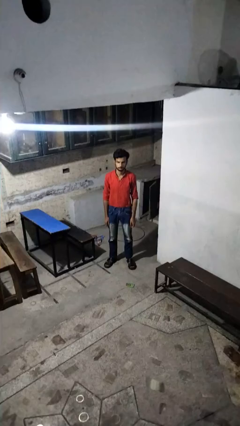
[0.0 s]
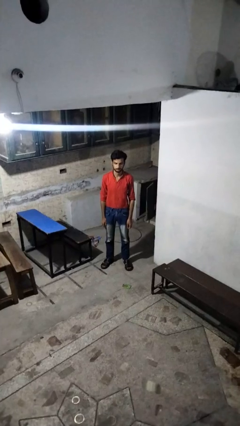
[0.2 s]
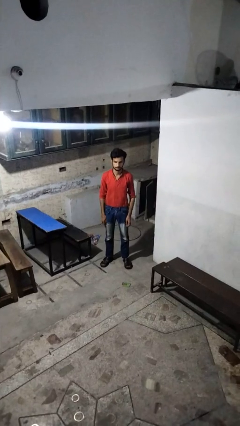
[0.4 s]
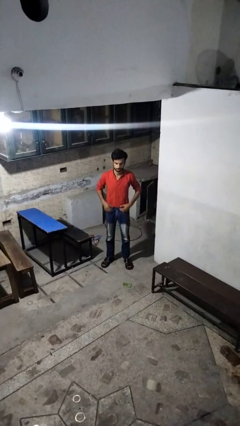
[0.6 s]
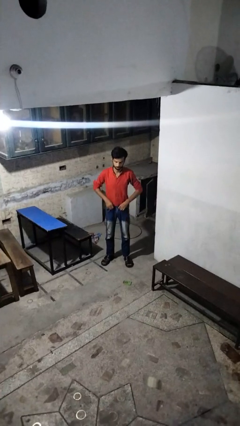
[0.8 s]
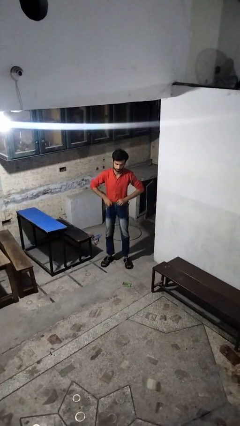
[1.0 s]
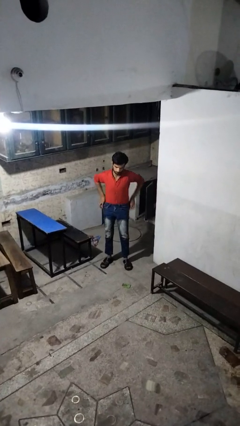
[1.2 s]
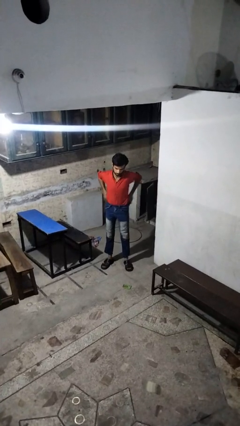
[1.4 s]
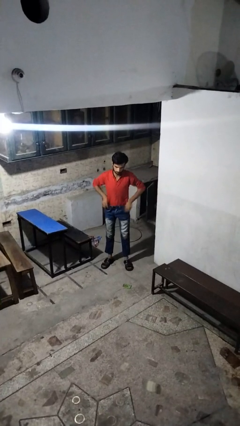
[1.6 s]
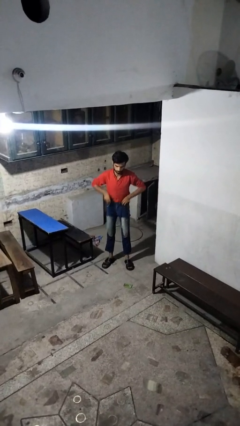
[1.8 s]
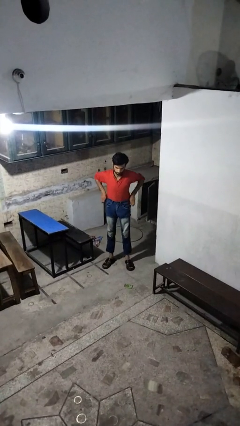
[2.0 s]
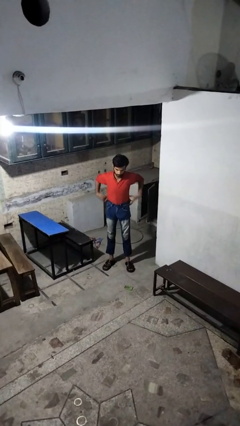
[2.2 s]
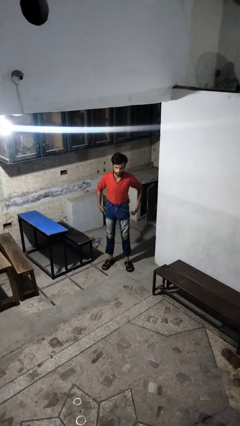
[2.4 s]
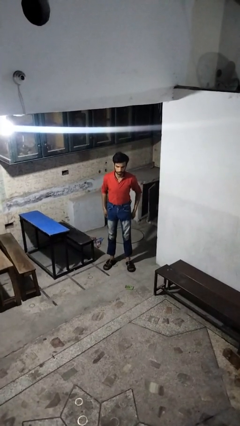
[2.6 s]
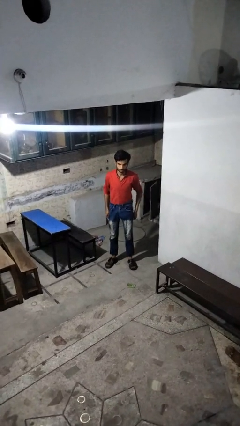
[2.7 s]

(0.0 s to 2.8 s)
person hikes up pants

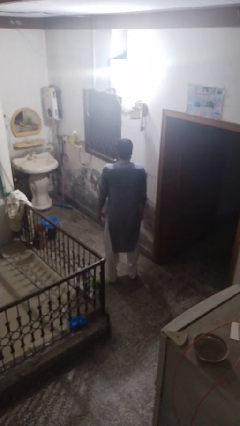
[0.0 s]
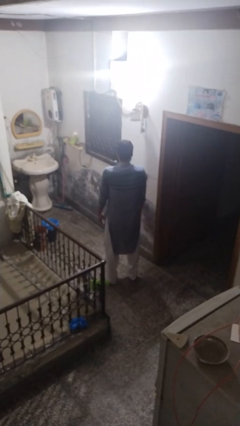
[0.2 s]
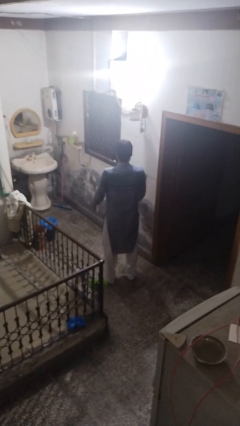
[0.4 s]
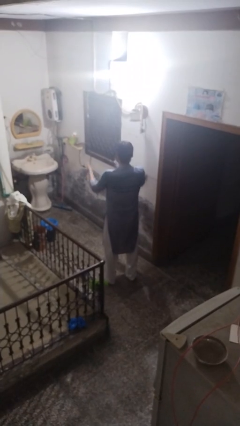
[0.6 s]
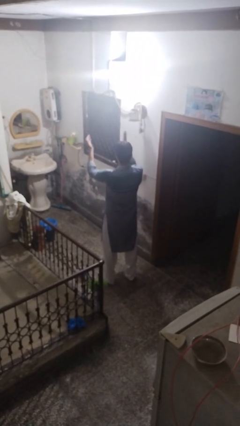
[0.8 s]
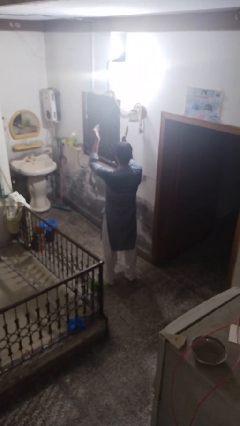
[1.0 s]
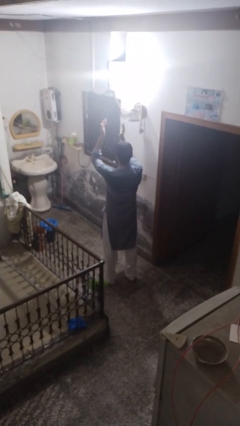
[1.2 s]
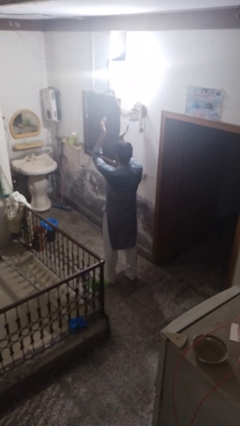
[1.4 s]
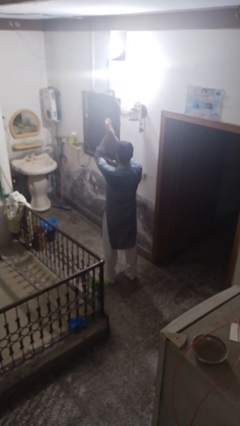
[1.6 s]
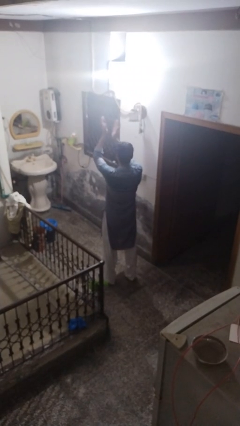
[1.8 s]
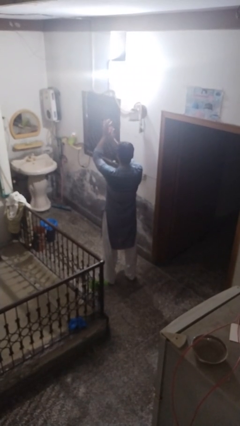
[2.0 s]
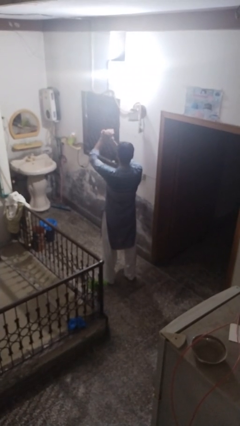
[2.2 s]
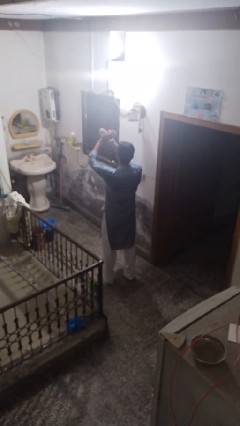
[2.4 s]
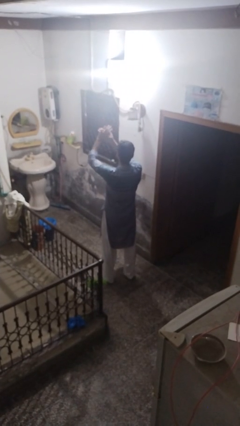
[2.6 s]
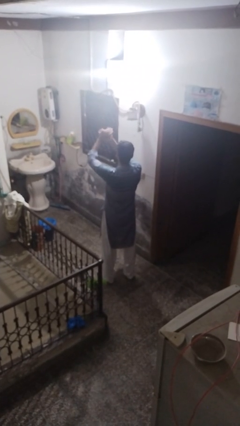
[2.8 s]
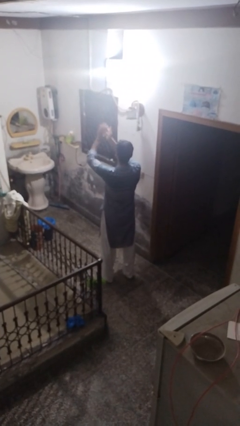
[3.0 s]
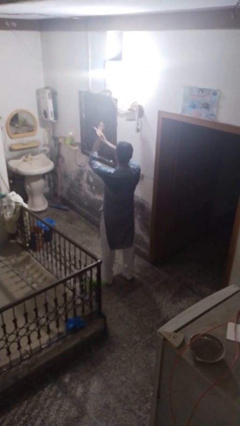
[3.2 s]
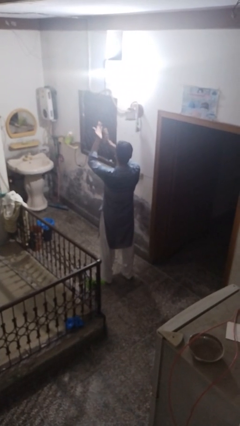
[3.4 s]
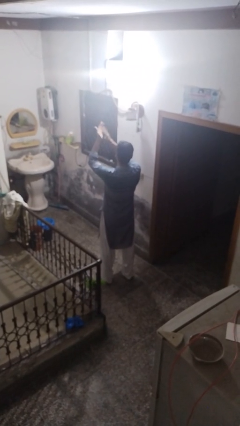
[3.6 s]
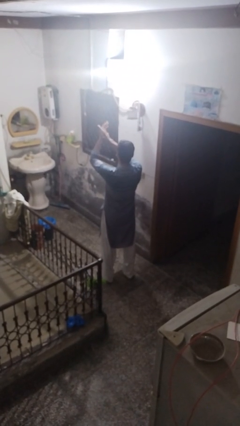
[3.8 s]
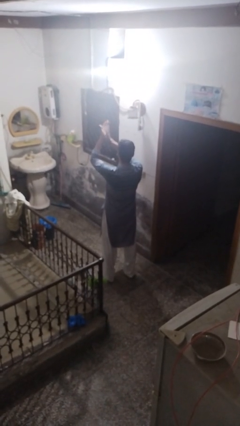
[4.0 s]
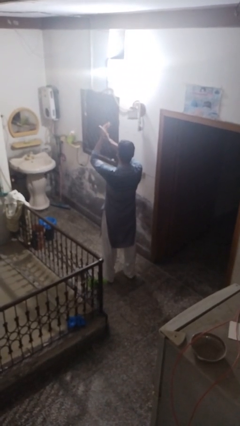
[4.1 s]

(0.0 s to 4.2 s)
person claps hands

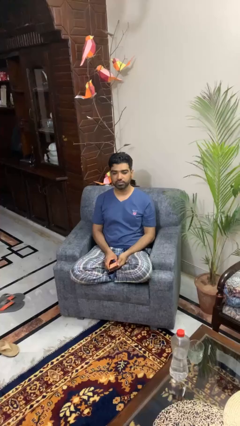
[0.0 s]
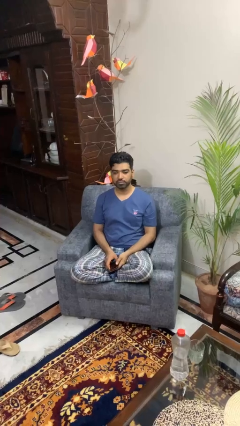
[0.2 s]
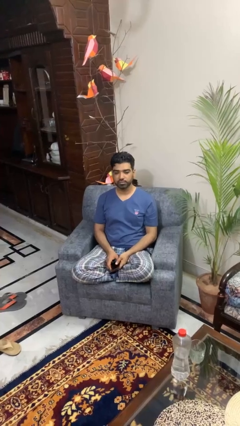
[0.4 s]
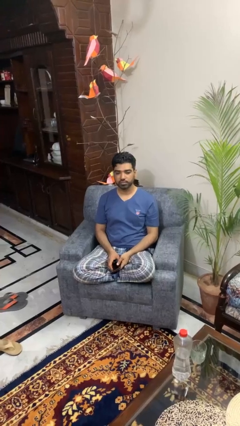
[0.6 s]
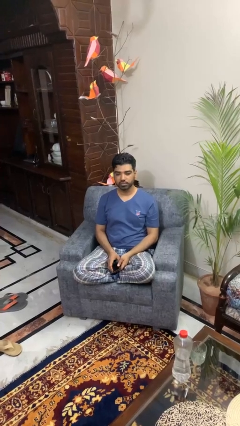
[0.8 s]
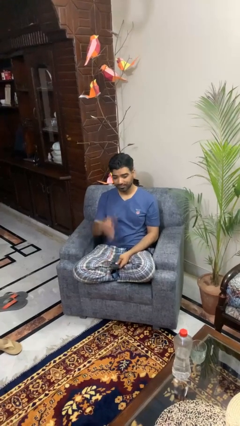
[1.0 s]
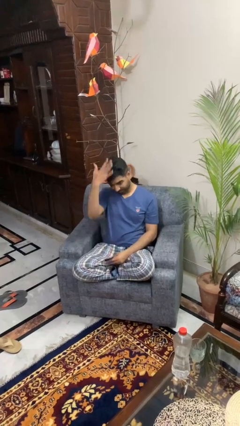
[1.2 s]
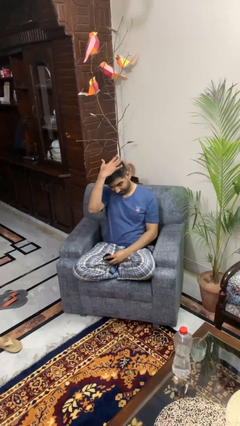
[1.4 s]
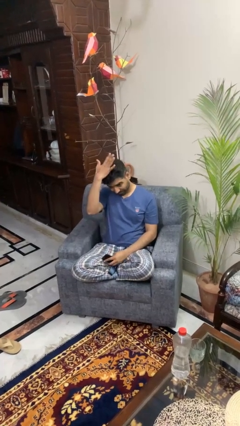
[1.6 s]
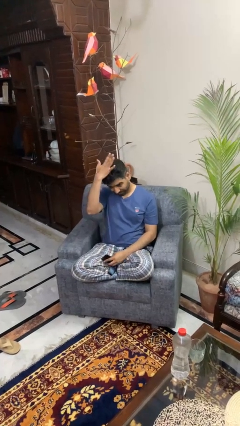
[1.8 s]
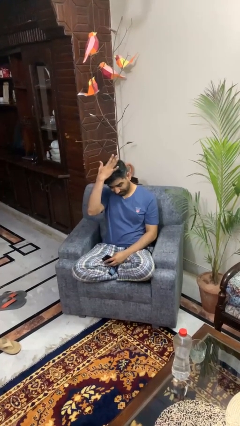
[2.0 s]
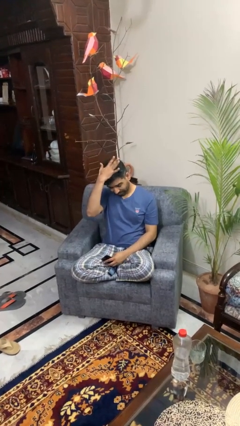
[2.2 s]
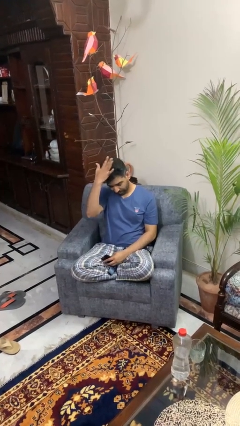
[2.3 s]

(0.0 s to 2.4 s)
person pats head

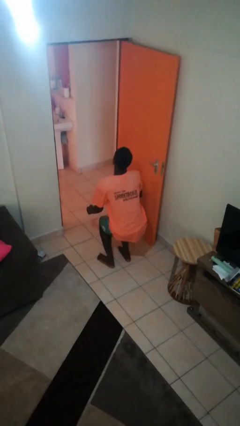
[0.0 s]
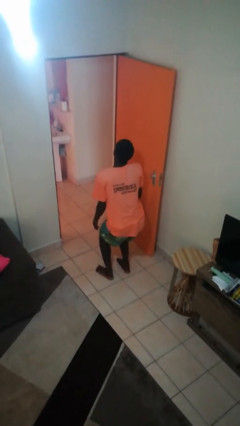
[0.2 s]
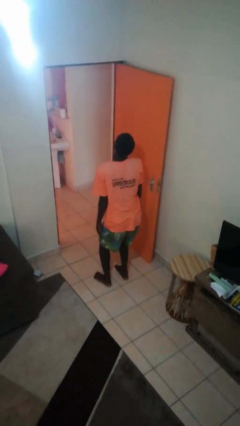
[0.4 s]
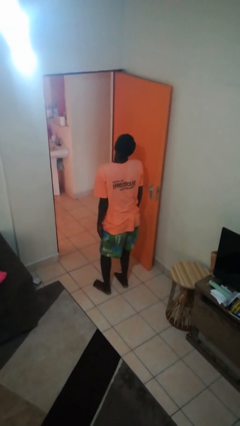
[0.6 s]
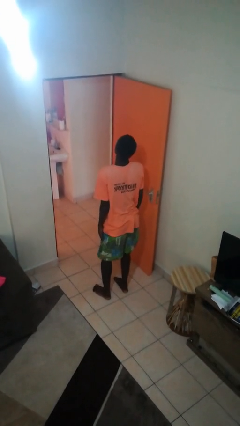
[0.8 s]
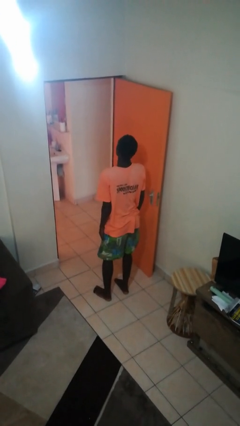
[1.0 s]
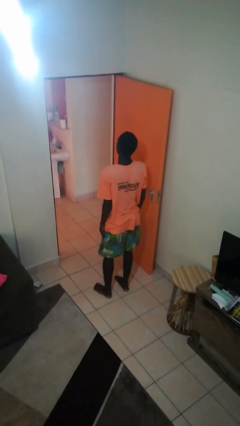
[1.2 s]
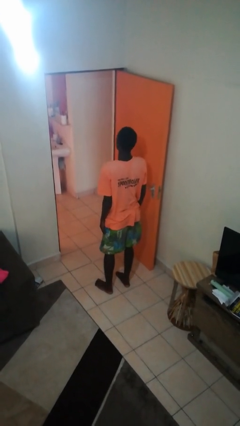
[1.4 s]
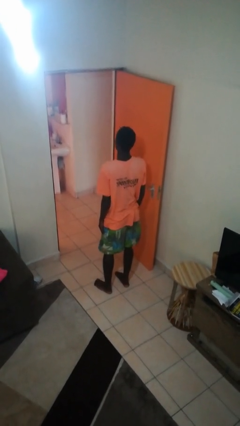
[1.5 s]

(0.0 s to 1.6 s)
person stands up

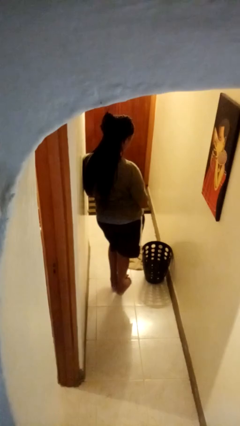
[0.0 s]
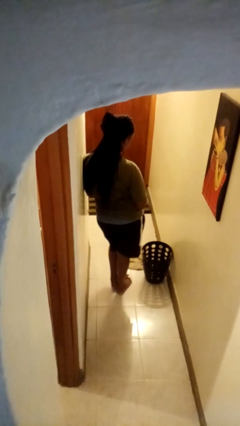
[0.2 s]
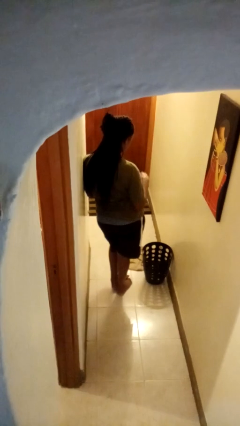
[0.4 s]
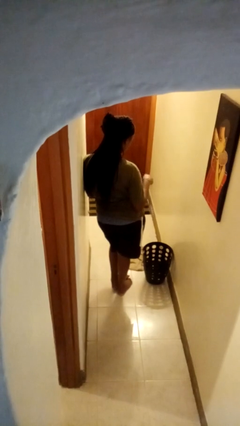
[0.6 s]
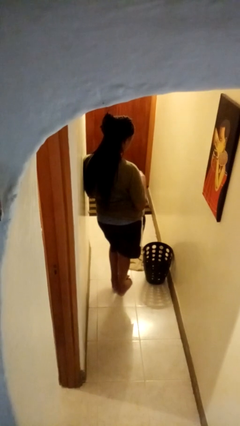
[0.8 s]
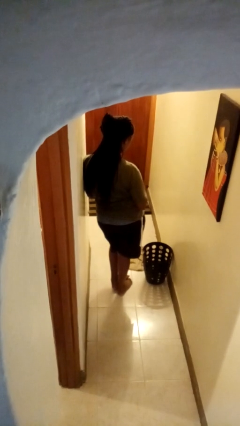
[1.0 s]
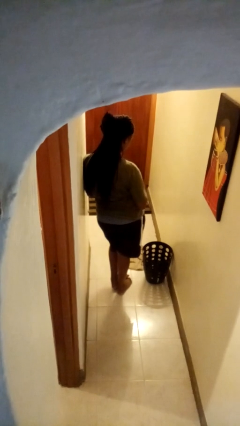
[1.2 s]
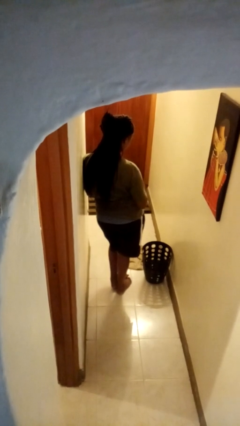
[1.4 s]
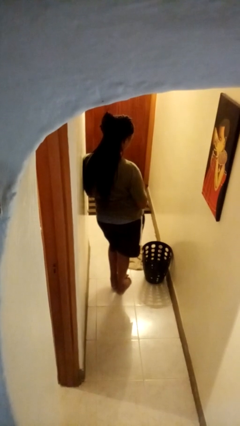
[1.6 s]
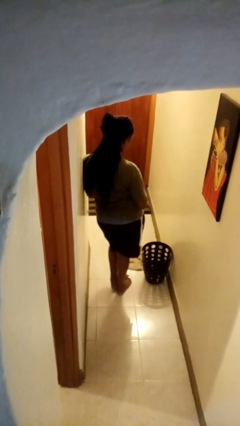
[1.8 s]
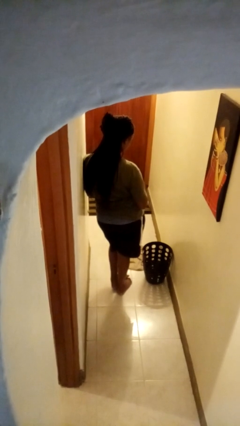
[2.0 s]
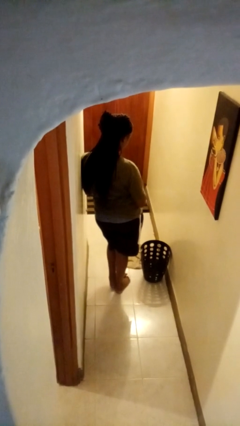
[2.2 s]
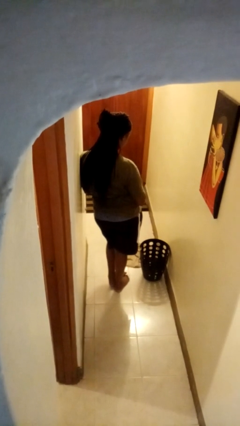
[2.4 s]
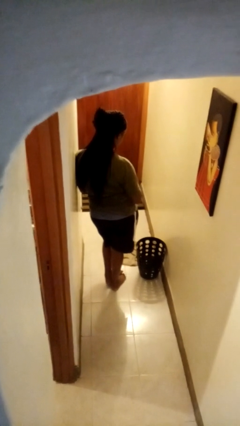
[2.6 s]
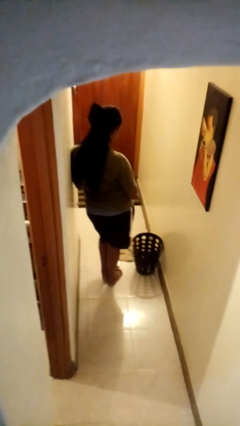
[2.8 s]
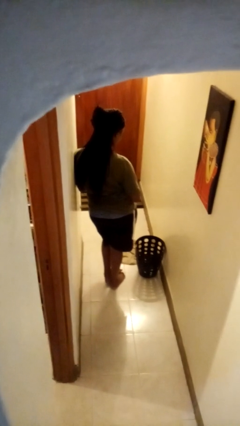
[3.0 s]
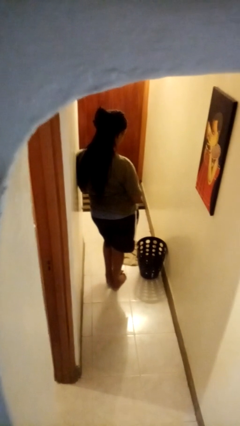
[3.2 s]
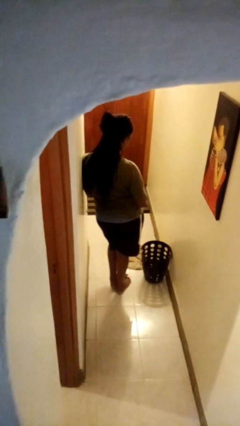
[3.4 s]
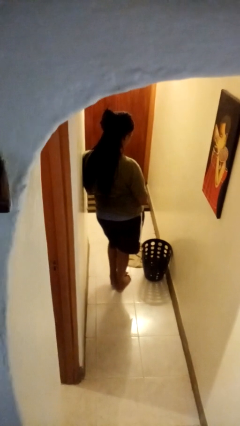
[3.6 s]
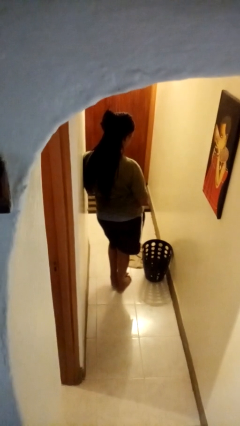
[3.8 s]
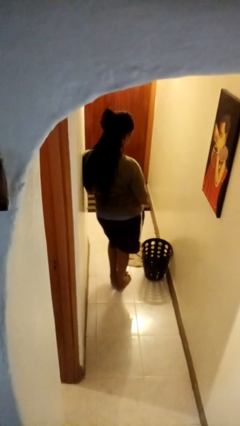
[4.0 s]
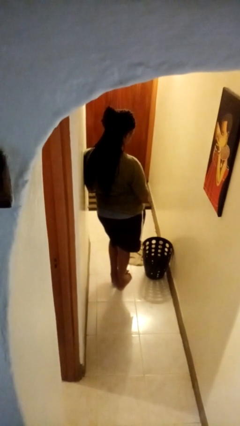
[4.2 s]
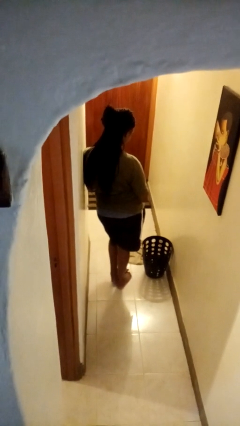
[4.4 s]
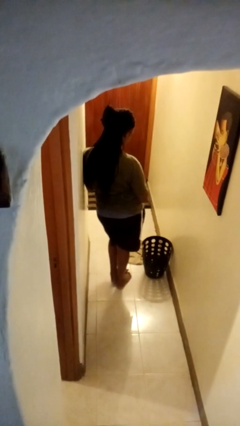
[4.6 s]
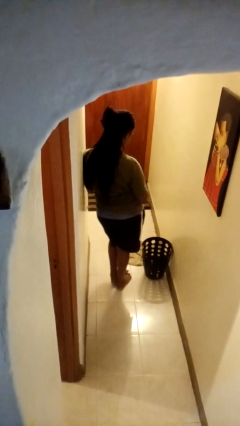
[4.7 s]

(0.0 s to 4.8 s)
person discards trash

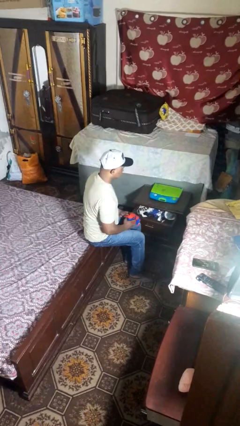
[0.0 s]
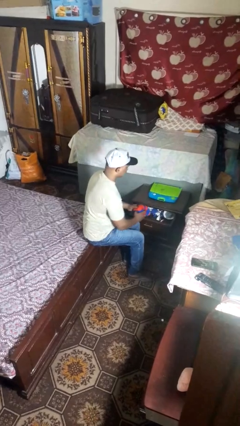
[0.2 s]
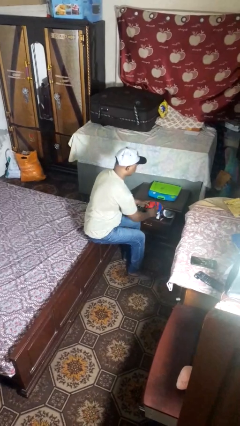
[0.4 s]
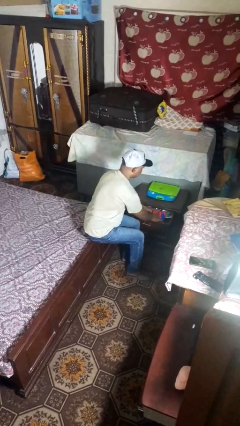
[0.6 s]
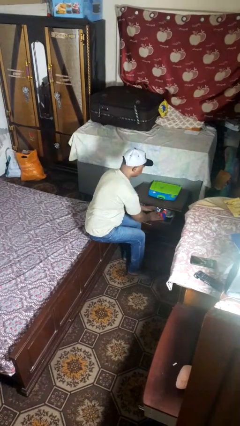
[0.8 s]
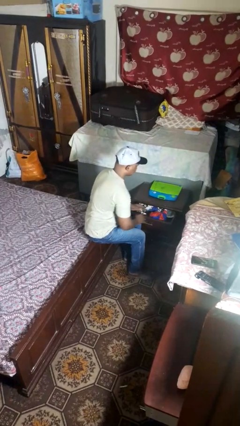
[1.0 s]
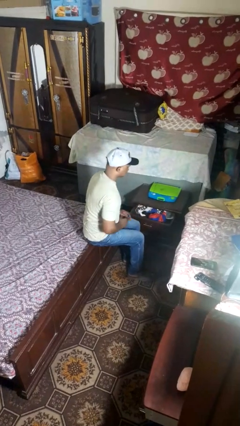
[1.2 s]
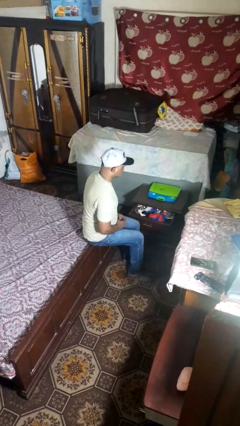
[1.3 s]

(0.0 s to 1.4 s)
person puts clothes into dresser

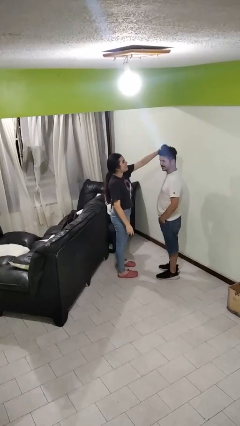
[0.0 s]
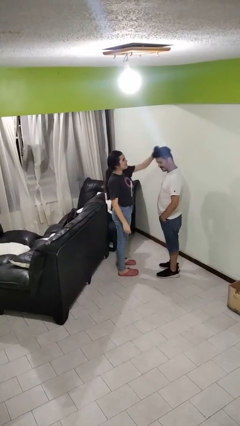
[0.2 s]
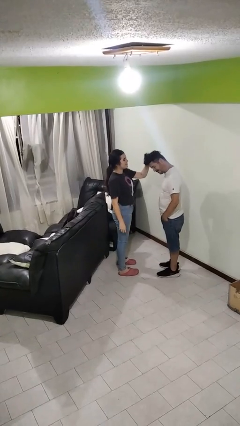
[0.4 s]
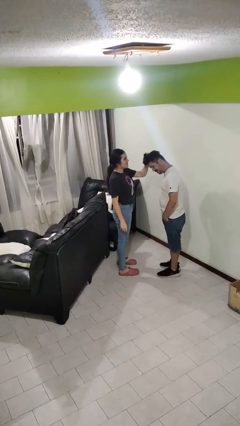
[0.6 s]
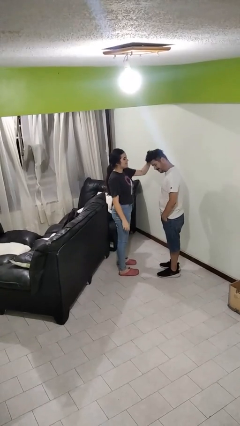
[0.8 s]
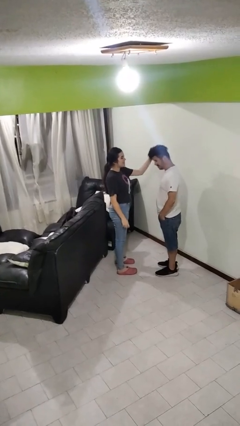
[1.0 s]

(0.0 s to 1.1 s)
person grabs person by hair
